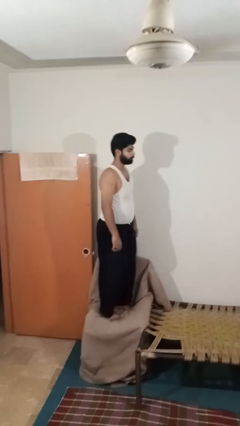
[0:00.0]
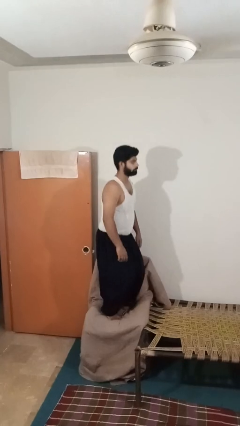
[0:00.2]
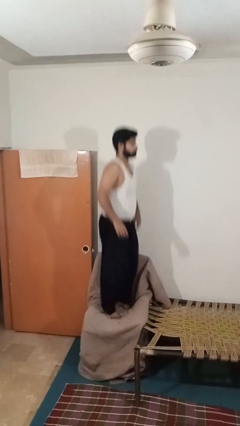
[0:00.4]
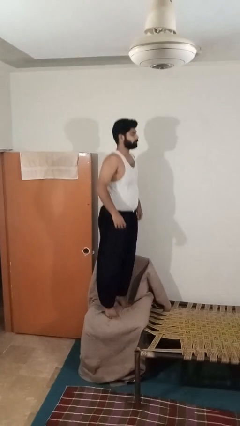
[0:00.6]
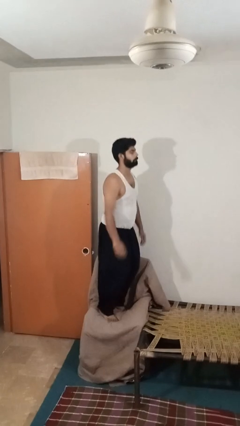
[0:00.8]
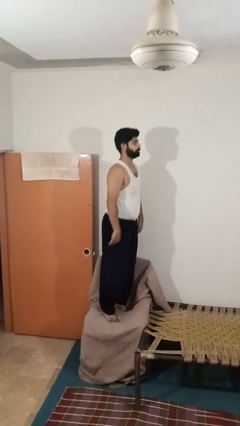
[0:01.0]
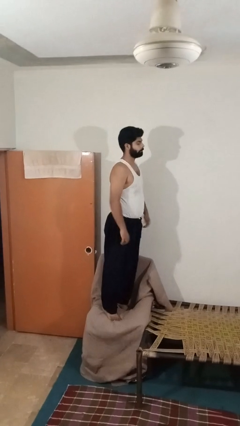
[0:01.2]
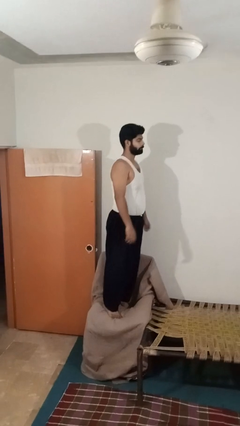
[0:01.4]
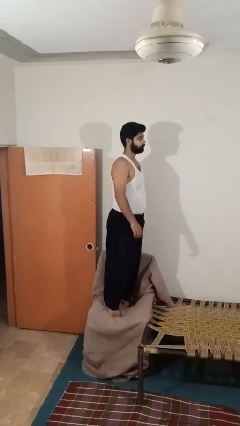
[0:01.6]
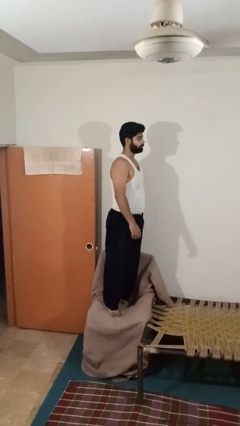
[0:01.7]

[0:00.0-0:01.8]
person jumps on couch

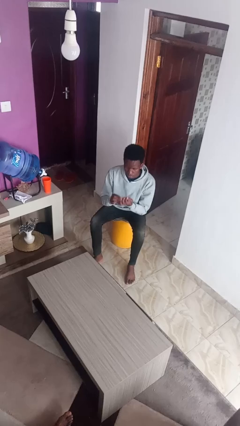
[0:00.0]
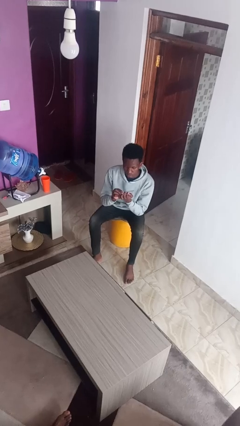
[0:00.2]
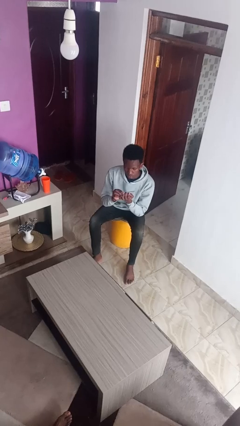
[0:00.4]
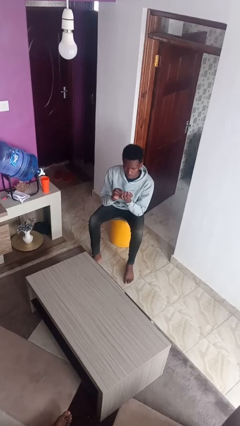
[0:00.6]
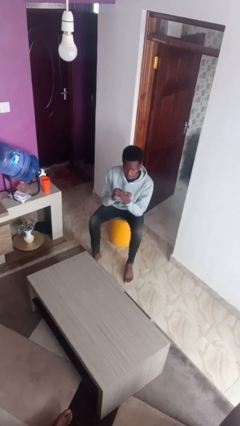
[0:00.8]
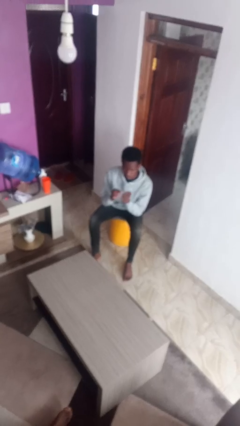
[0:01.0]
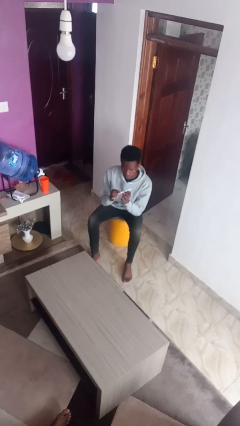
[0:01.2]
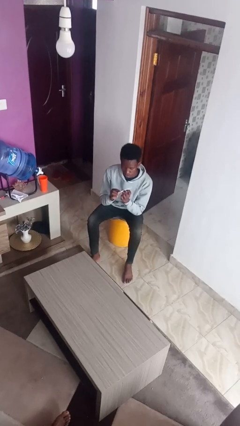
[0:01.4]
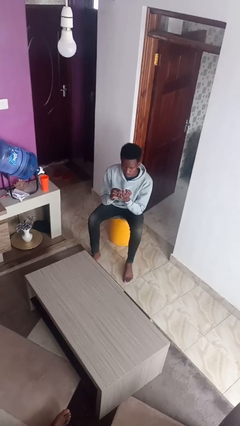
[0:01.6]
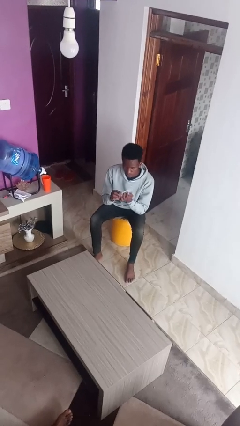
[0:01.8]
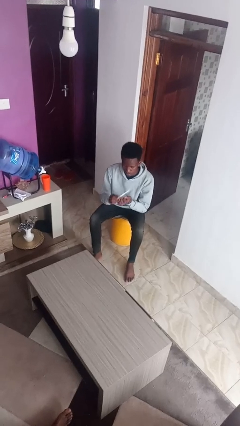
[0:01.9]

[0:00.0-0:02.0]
person files fingernails

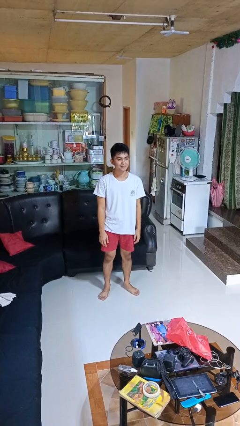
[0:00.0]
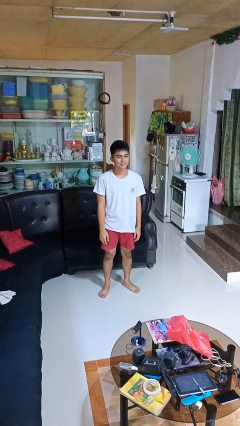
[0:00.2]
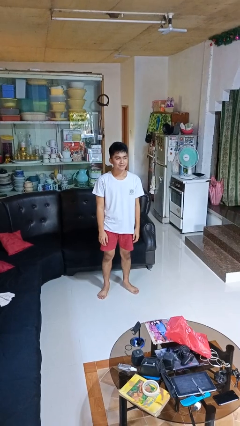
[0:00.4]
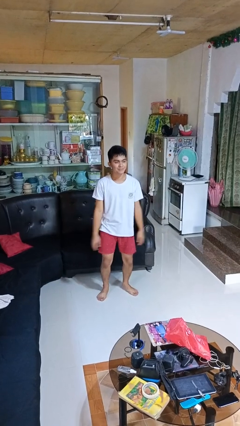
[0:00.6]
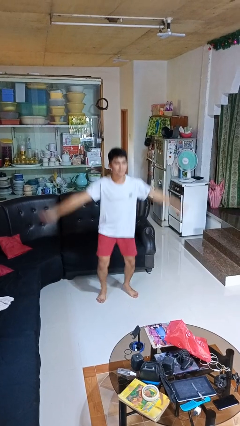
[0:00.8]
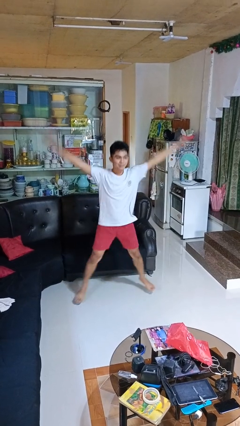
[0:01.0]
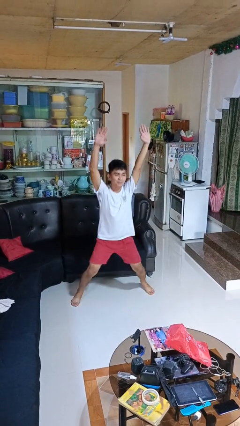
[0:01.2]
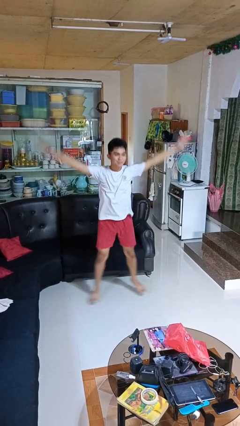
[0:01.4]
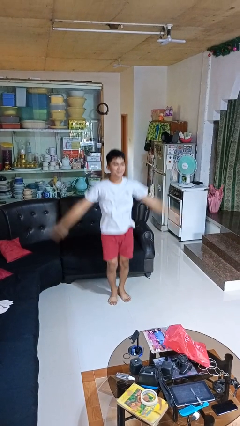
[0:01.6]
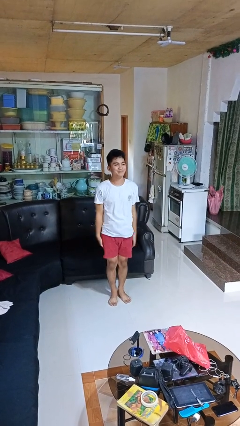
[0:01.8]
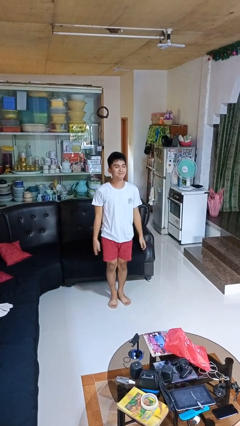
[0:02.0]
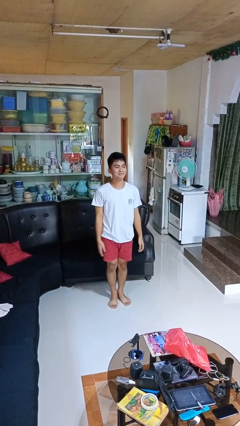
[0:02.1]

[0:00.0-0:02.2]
person exercises with jumping jacks

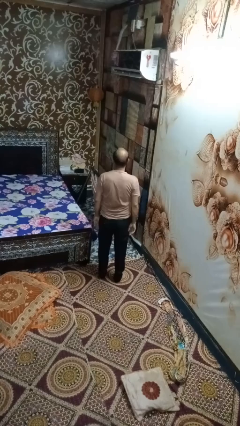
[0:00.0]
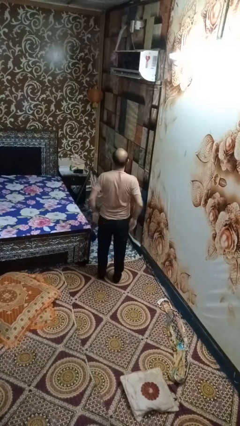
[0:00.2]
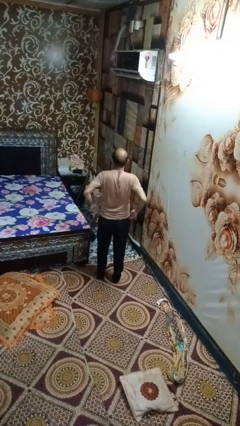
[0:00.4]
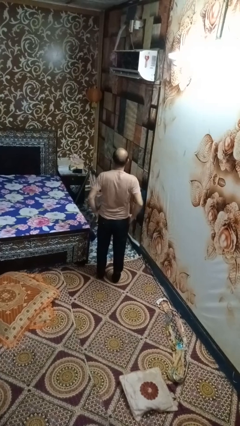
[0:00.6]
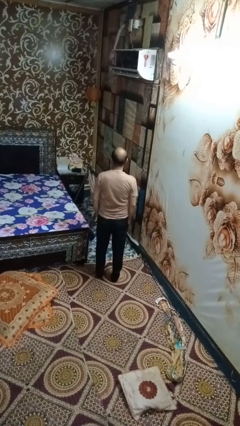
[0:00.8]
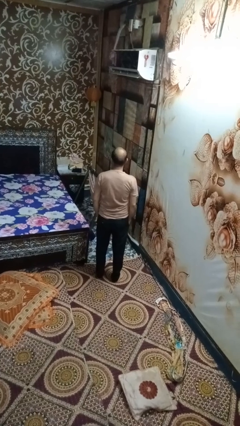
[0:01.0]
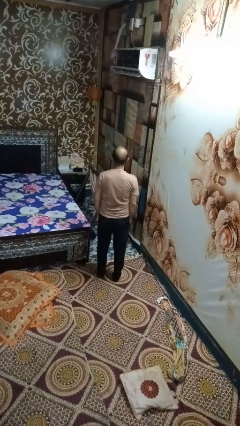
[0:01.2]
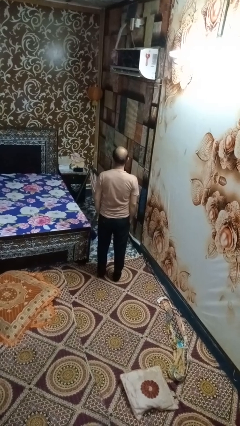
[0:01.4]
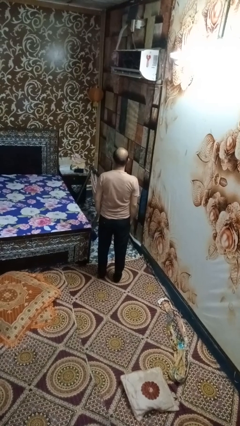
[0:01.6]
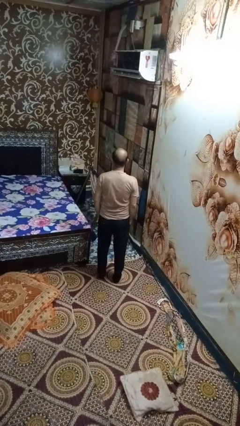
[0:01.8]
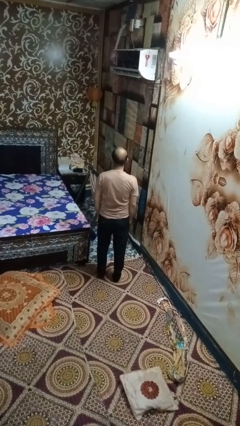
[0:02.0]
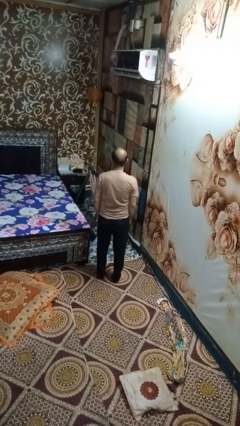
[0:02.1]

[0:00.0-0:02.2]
person puts hands in back pockets

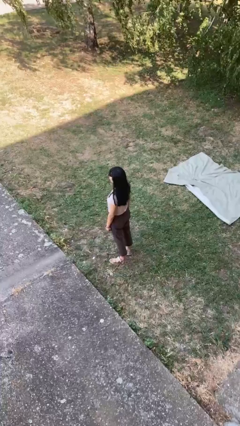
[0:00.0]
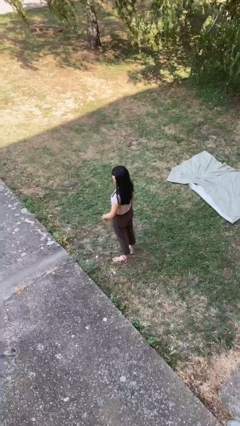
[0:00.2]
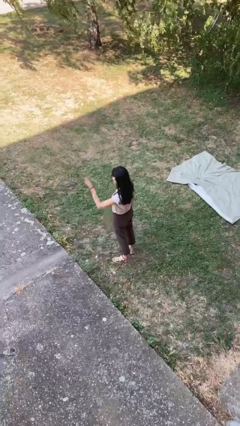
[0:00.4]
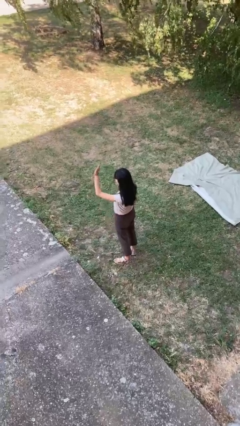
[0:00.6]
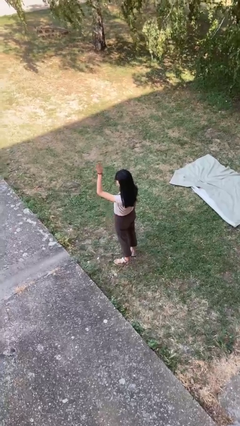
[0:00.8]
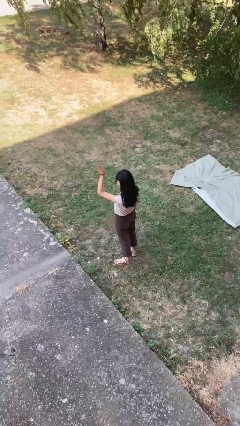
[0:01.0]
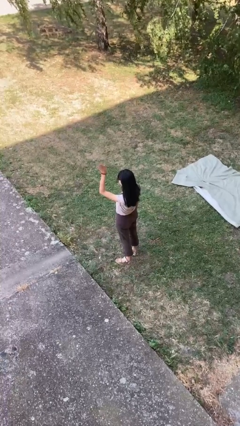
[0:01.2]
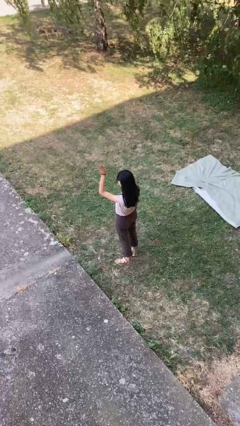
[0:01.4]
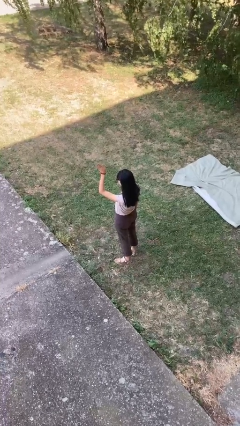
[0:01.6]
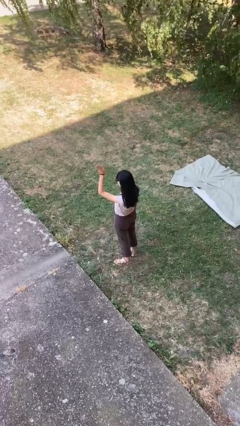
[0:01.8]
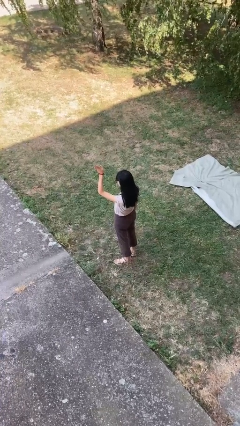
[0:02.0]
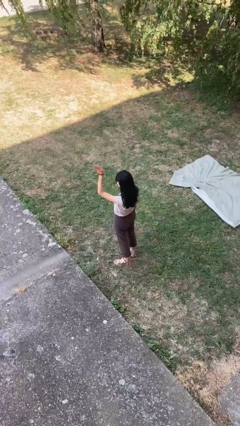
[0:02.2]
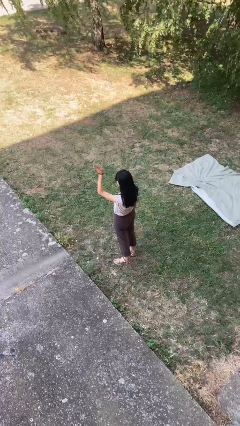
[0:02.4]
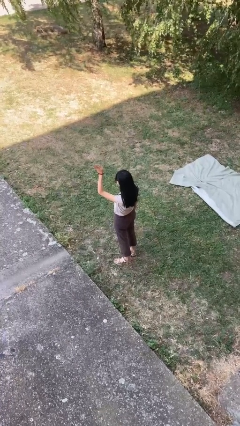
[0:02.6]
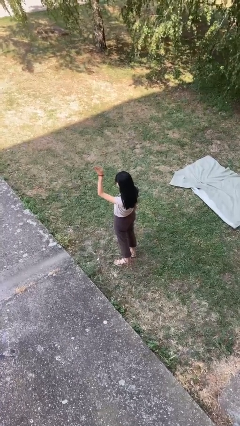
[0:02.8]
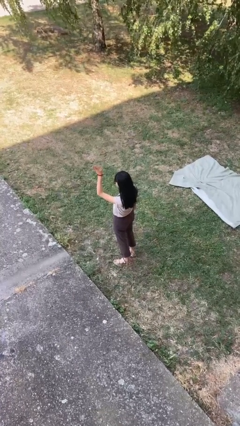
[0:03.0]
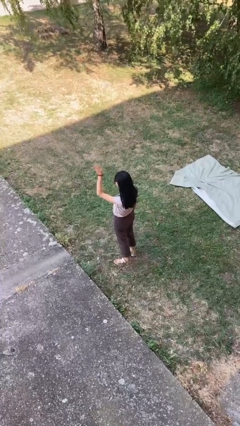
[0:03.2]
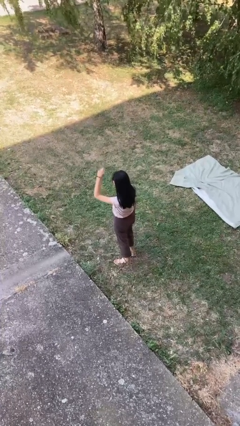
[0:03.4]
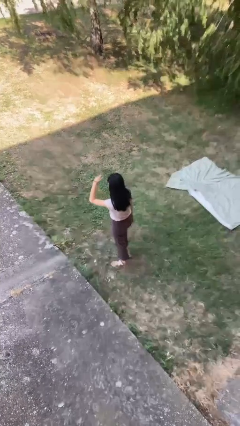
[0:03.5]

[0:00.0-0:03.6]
person waves at person

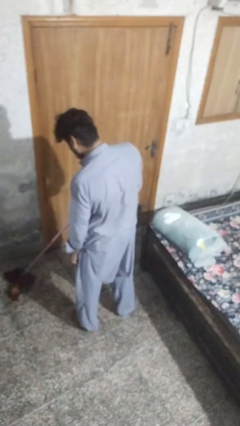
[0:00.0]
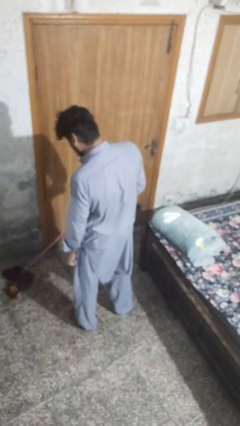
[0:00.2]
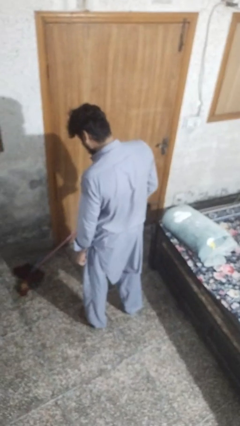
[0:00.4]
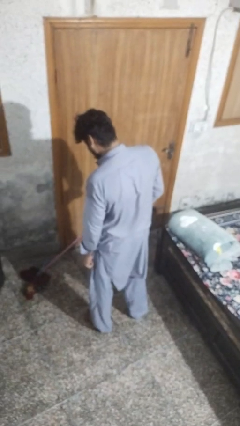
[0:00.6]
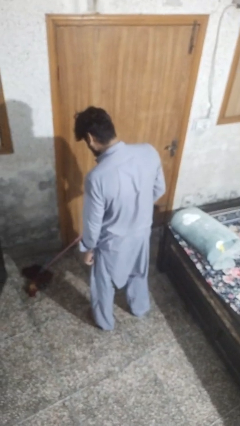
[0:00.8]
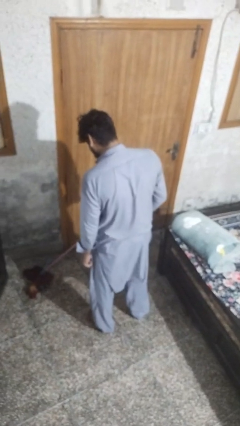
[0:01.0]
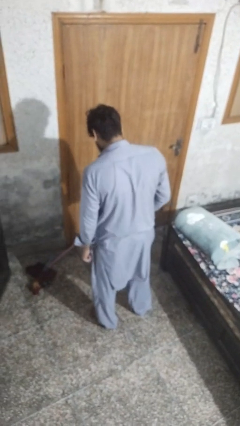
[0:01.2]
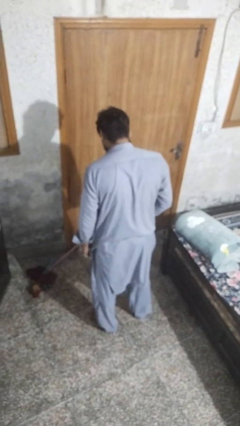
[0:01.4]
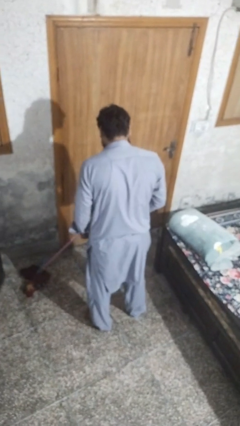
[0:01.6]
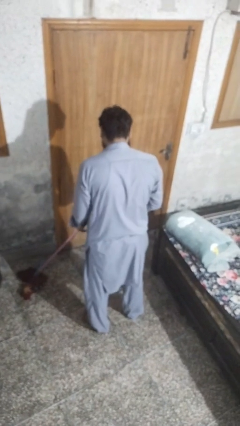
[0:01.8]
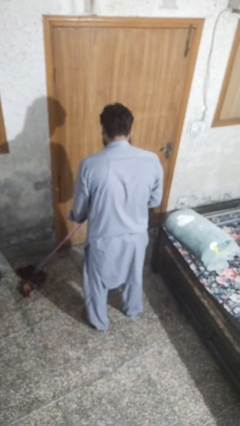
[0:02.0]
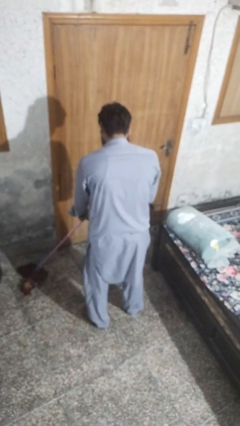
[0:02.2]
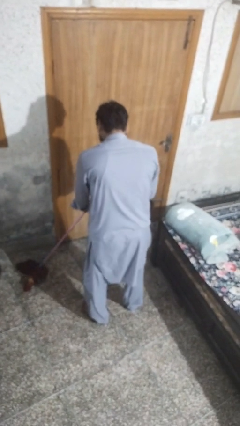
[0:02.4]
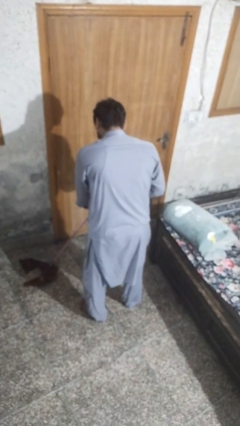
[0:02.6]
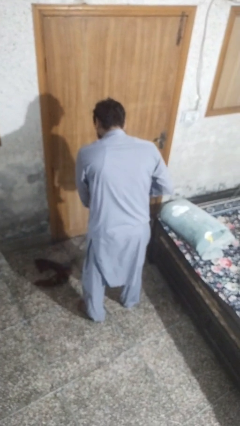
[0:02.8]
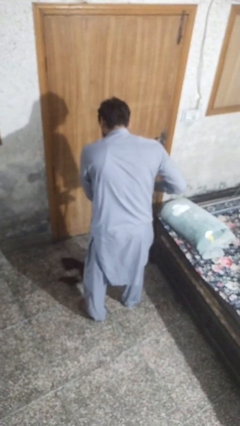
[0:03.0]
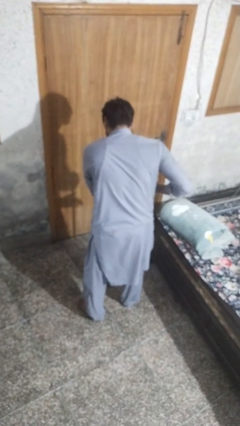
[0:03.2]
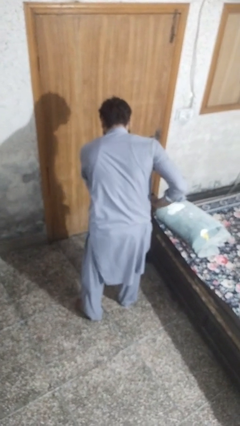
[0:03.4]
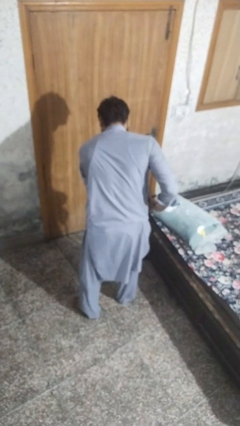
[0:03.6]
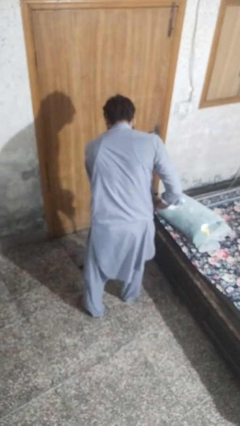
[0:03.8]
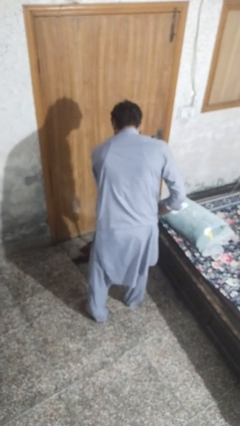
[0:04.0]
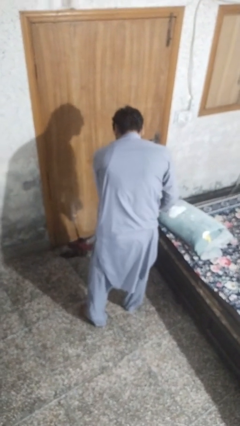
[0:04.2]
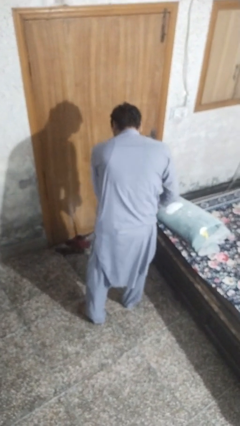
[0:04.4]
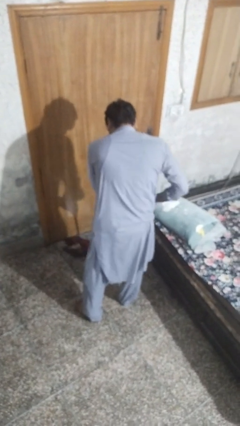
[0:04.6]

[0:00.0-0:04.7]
person mops

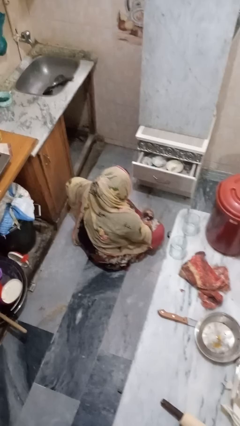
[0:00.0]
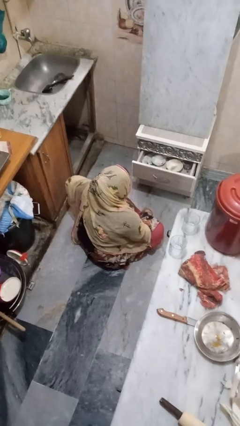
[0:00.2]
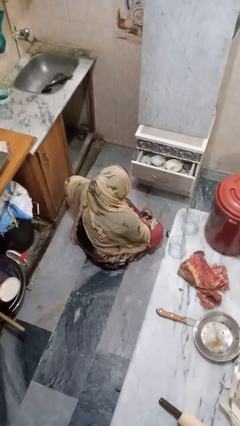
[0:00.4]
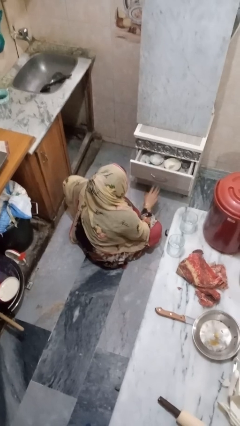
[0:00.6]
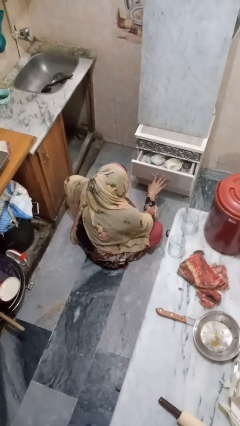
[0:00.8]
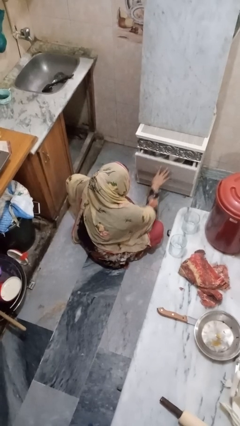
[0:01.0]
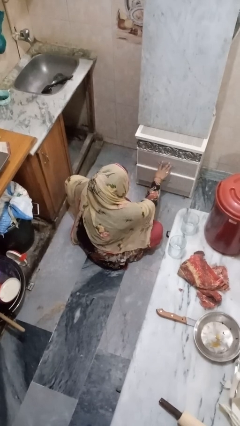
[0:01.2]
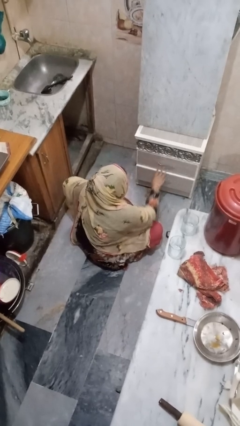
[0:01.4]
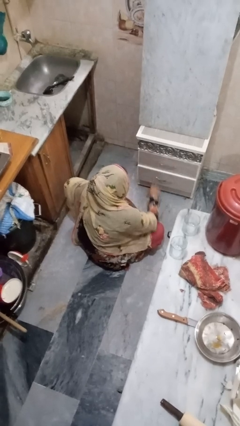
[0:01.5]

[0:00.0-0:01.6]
person closes kitchen drawer
